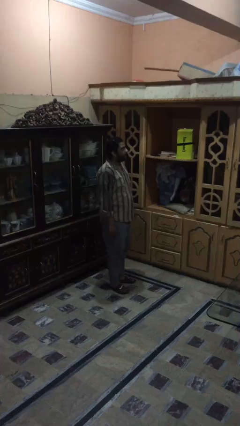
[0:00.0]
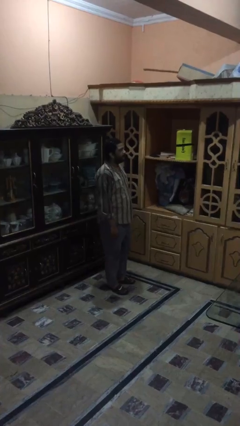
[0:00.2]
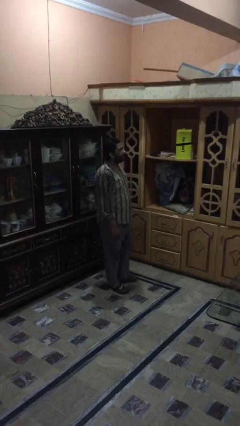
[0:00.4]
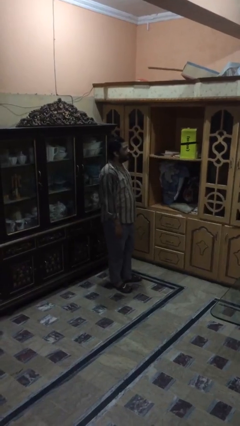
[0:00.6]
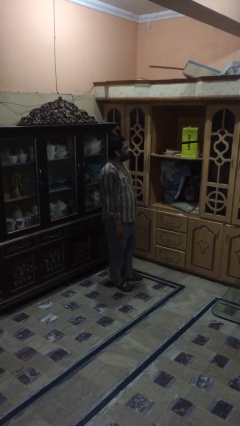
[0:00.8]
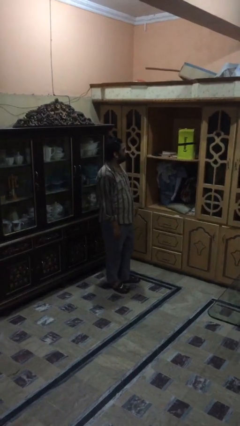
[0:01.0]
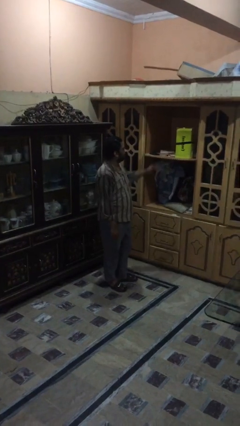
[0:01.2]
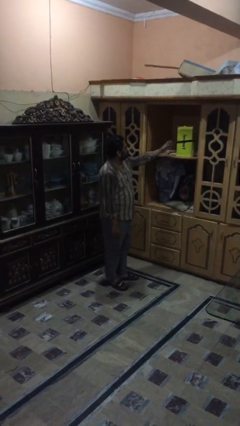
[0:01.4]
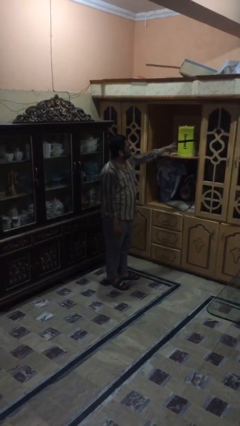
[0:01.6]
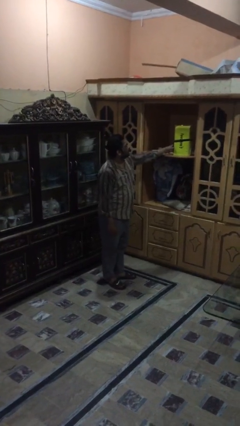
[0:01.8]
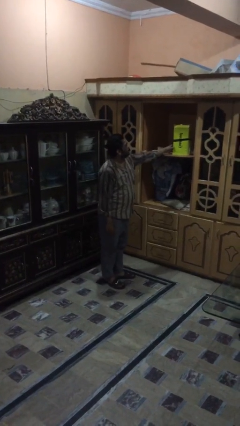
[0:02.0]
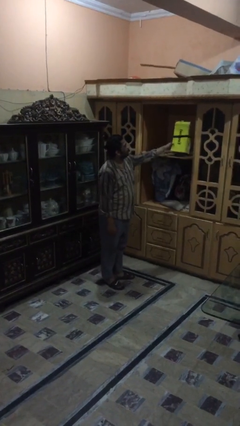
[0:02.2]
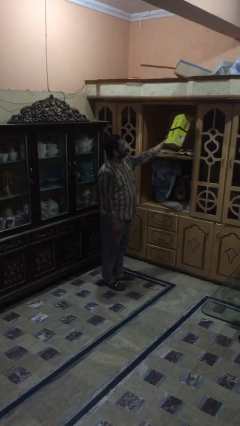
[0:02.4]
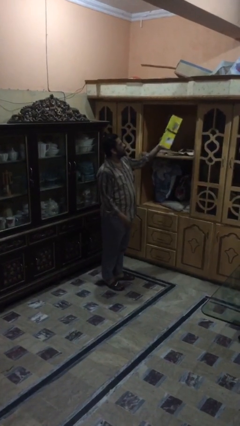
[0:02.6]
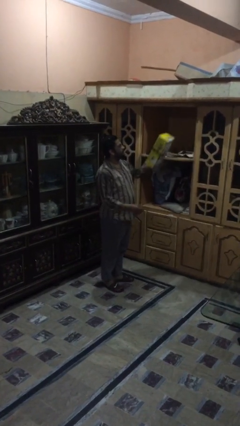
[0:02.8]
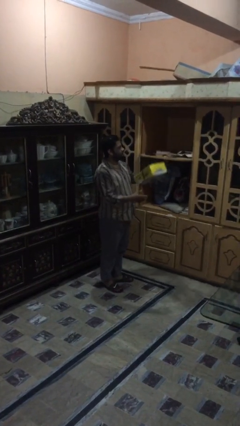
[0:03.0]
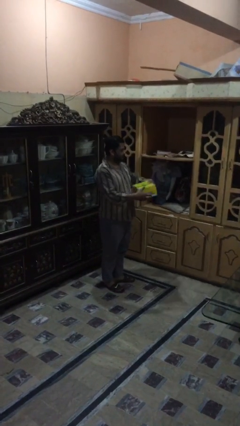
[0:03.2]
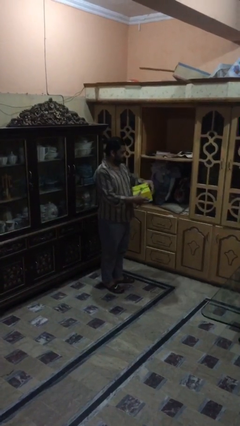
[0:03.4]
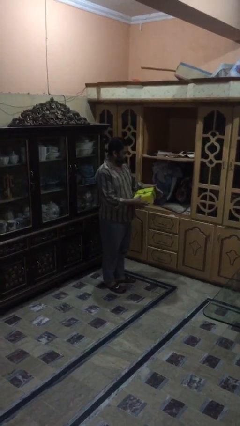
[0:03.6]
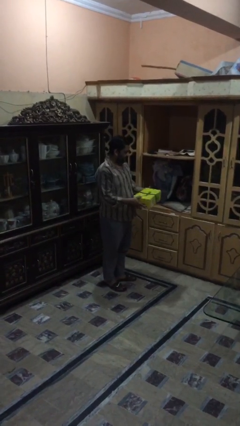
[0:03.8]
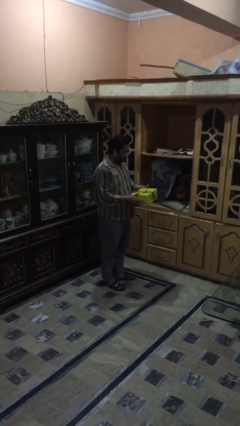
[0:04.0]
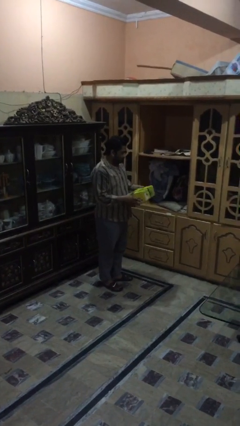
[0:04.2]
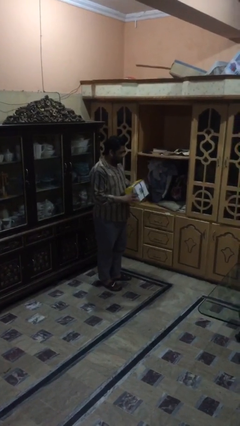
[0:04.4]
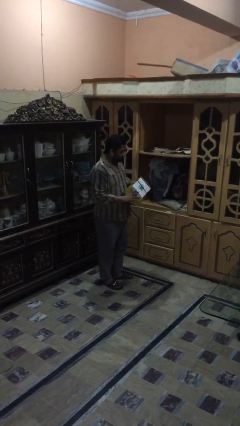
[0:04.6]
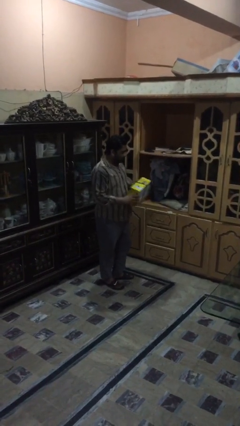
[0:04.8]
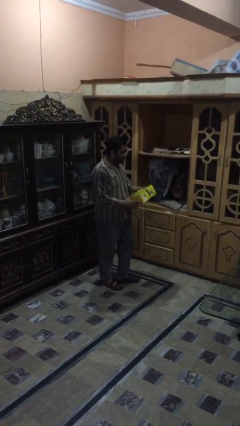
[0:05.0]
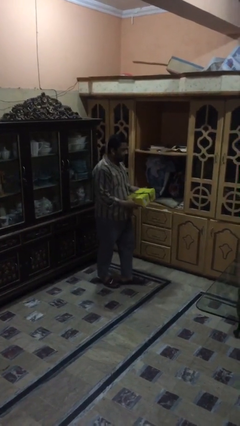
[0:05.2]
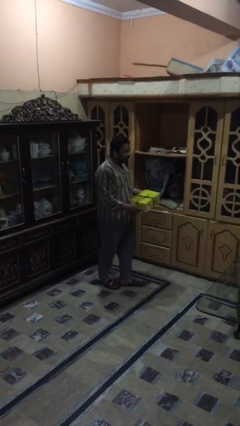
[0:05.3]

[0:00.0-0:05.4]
person picks up object from shelf

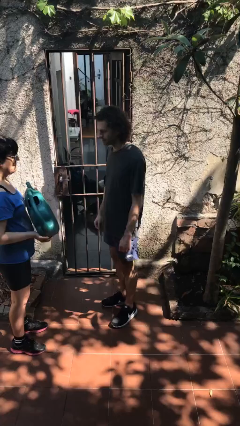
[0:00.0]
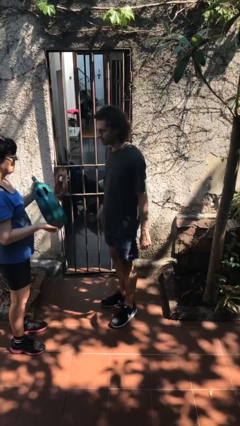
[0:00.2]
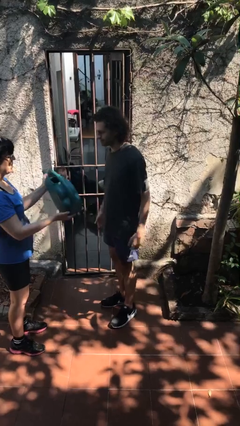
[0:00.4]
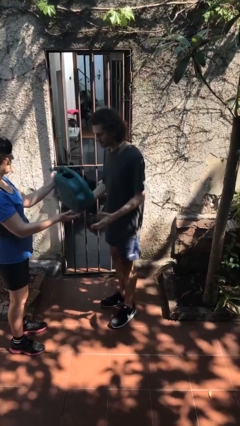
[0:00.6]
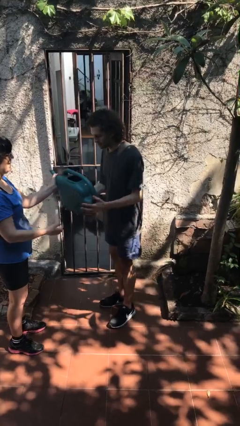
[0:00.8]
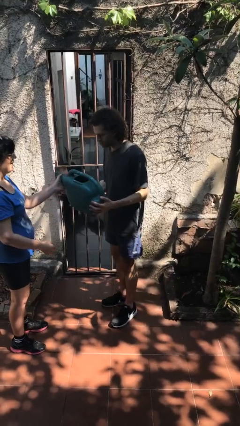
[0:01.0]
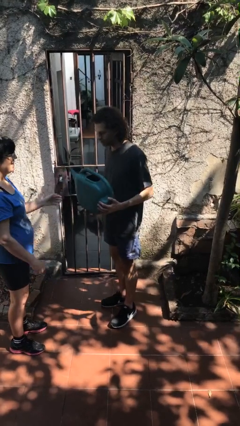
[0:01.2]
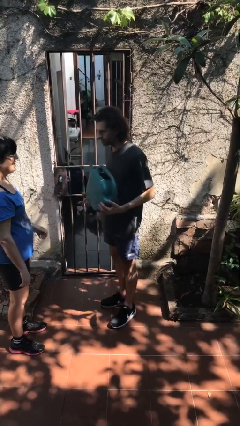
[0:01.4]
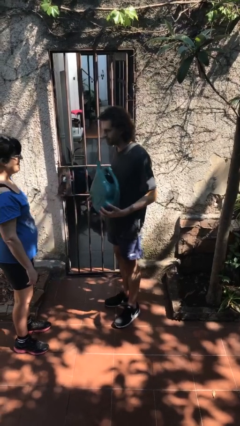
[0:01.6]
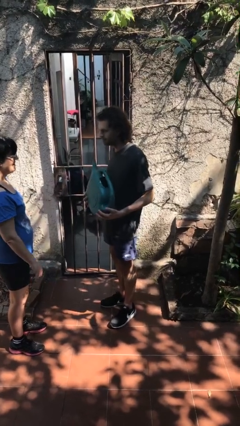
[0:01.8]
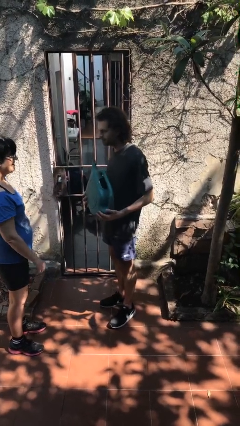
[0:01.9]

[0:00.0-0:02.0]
person transfers object to person

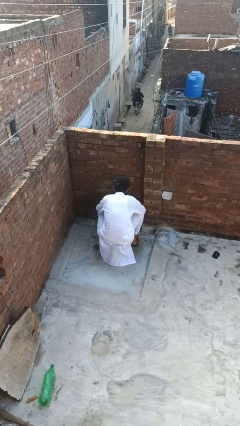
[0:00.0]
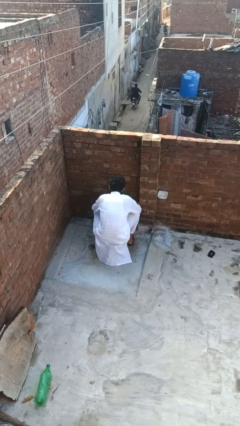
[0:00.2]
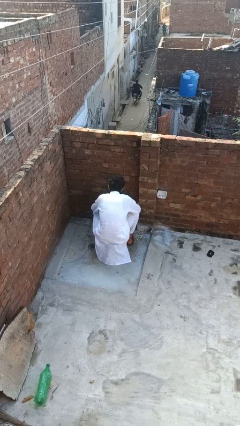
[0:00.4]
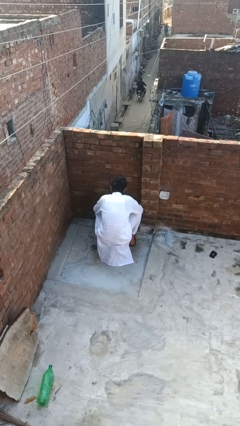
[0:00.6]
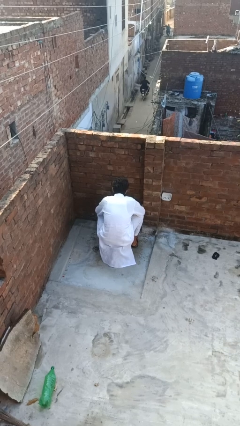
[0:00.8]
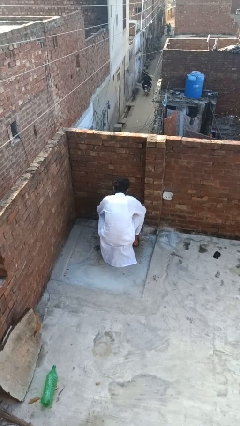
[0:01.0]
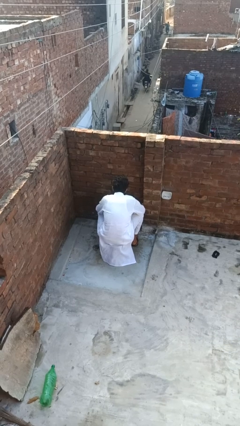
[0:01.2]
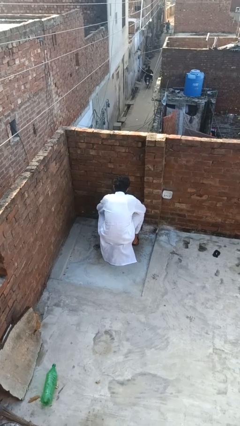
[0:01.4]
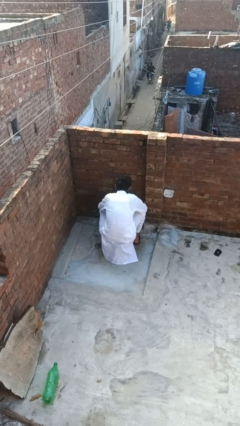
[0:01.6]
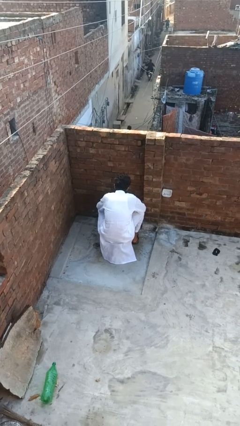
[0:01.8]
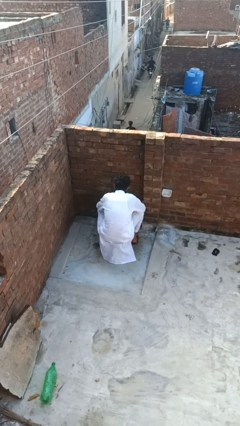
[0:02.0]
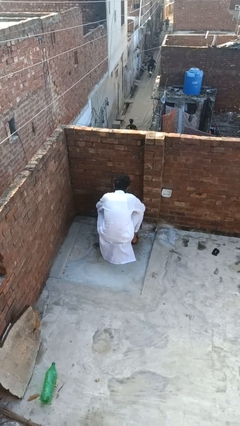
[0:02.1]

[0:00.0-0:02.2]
person turns on faucet

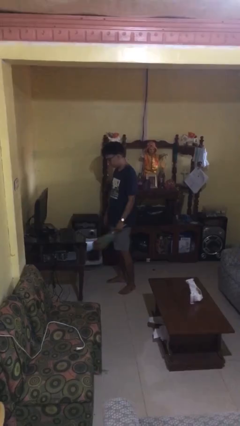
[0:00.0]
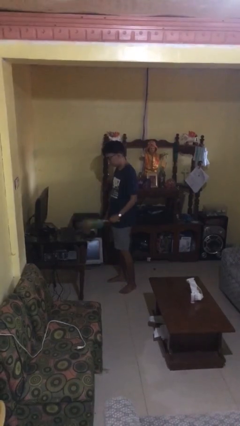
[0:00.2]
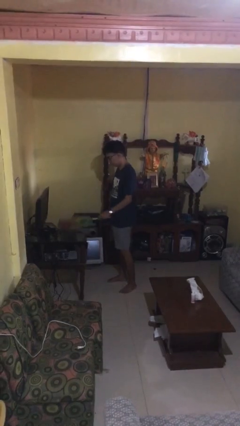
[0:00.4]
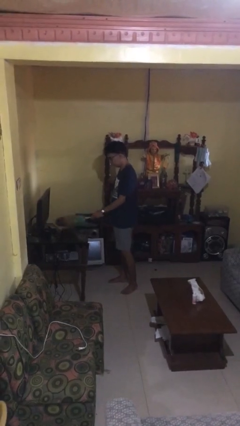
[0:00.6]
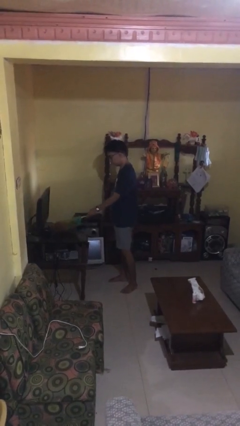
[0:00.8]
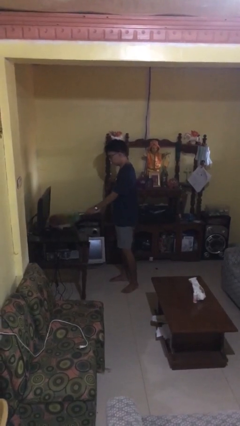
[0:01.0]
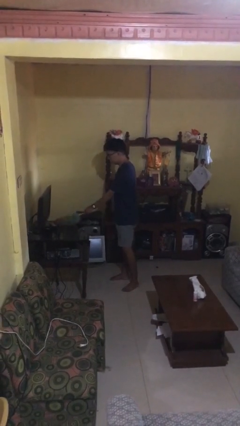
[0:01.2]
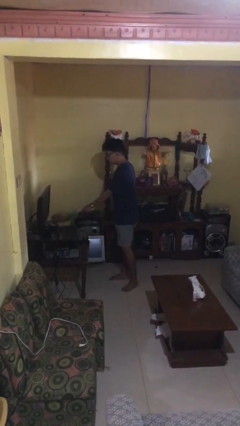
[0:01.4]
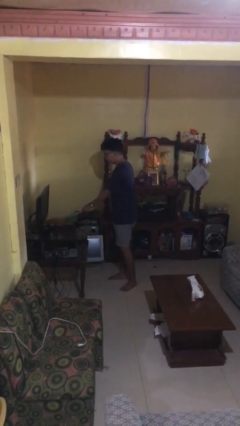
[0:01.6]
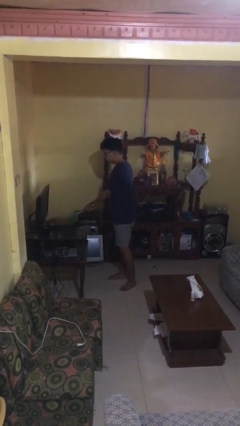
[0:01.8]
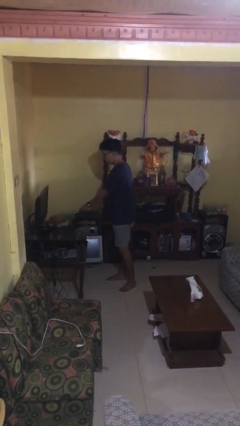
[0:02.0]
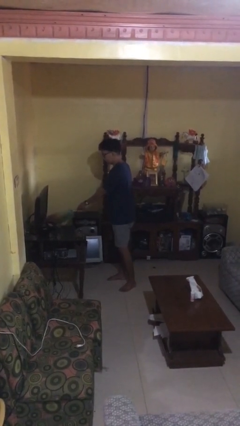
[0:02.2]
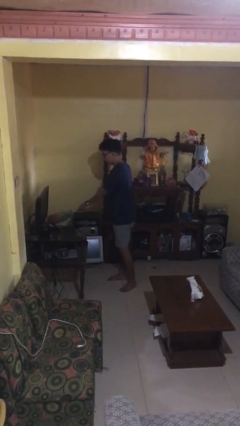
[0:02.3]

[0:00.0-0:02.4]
person dusts furniture

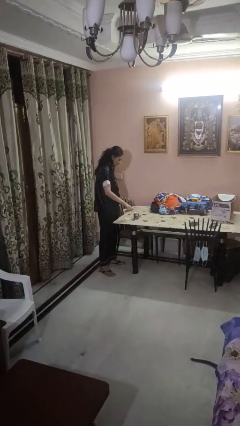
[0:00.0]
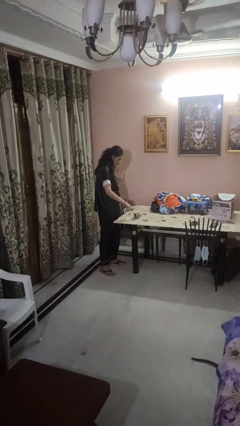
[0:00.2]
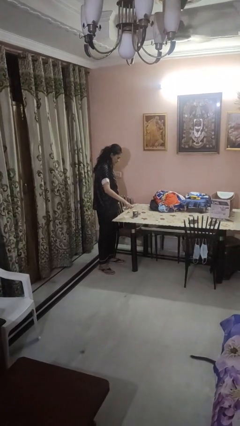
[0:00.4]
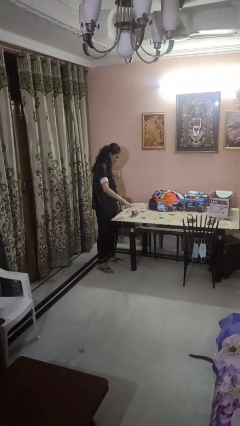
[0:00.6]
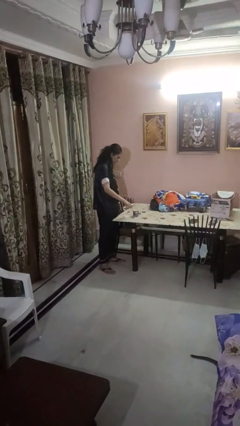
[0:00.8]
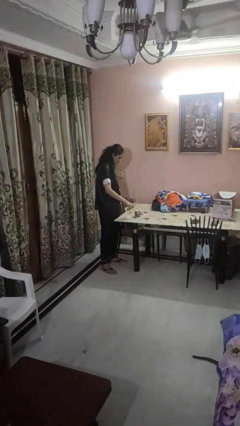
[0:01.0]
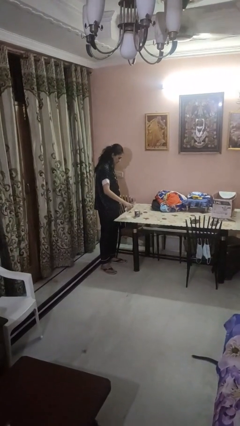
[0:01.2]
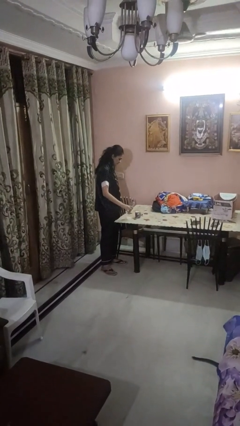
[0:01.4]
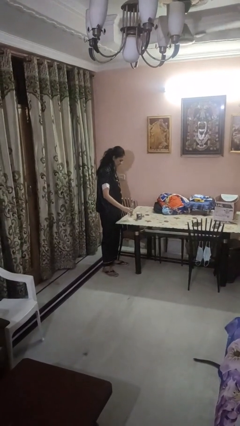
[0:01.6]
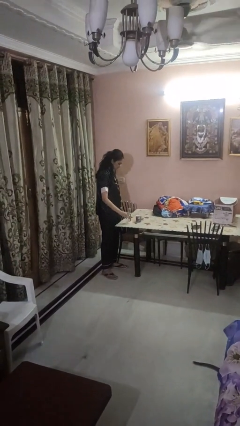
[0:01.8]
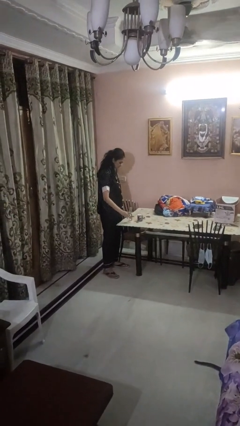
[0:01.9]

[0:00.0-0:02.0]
person pours liquid into cup

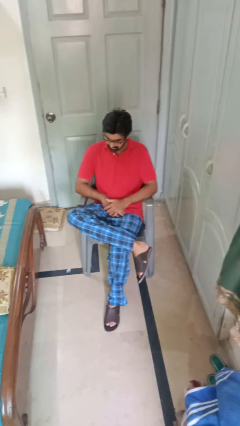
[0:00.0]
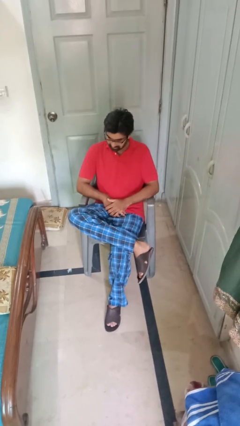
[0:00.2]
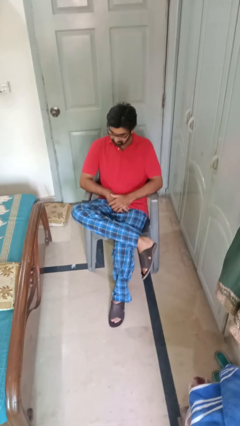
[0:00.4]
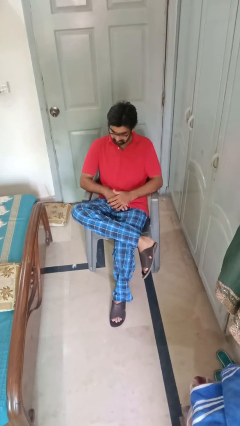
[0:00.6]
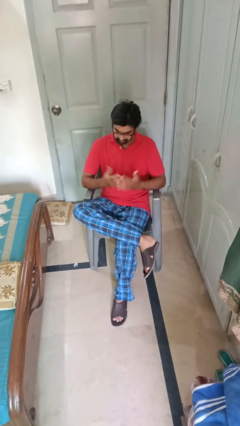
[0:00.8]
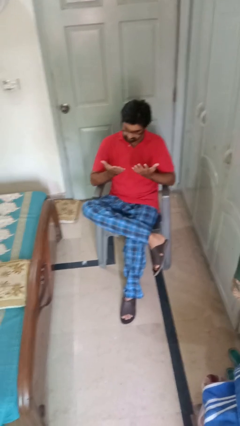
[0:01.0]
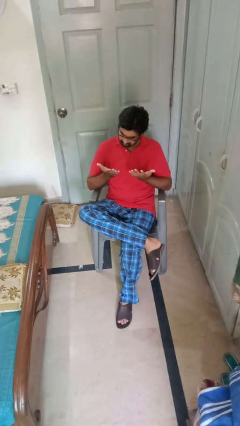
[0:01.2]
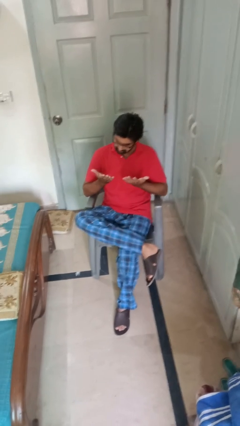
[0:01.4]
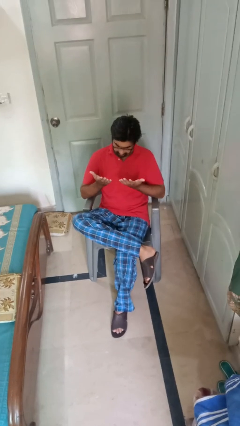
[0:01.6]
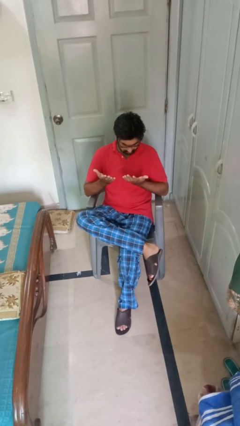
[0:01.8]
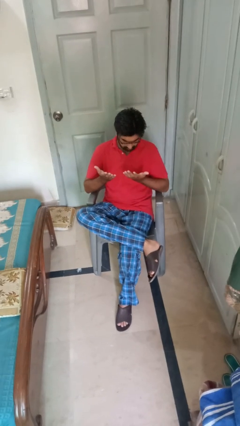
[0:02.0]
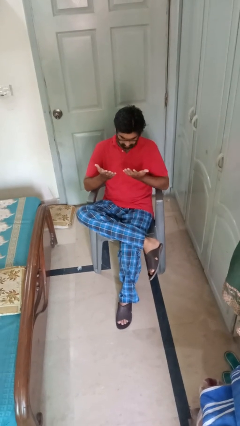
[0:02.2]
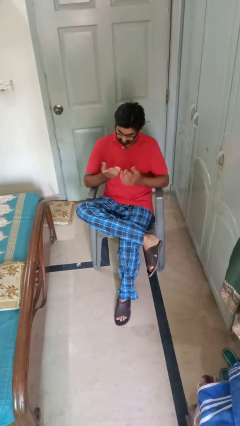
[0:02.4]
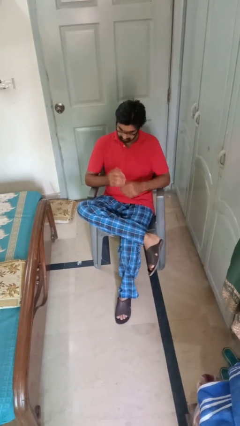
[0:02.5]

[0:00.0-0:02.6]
person looks at hands in lap

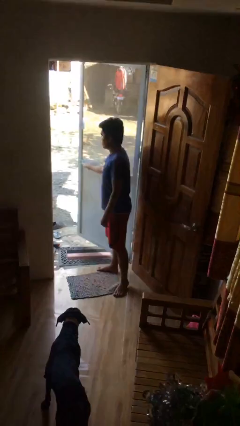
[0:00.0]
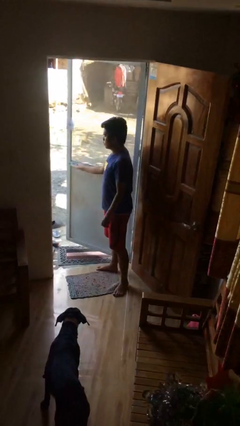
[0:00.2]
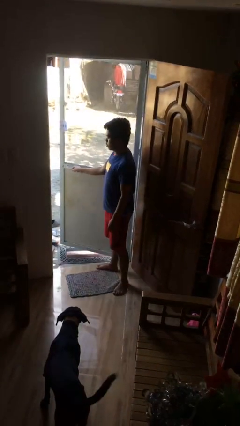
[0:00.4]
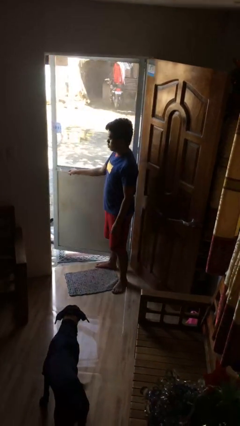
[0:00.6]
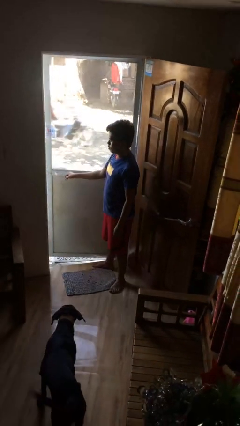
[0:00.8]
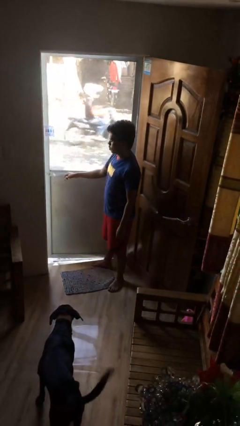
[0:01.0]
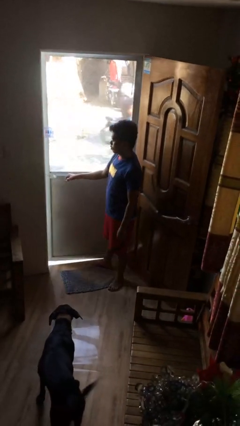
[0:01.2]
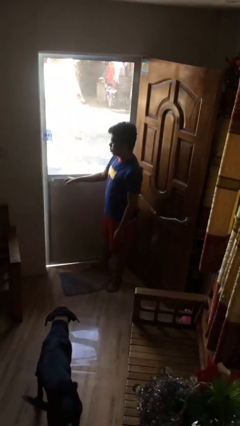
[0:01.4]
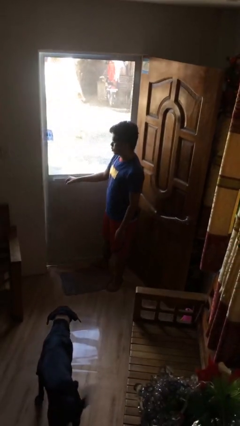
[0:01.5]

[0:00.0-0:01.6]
person closes facility door
